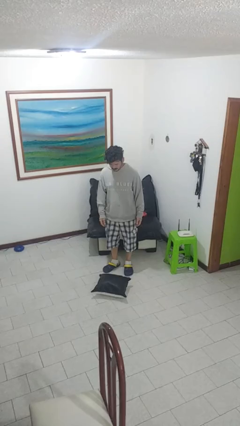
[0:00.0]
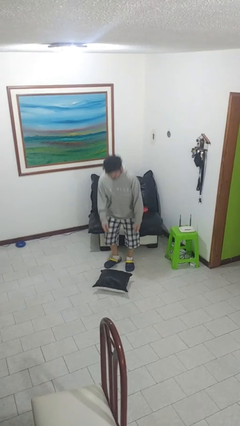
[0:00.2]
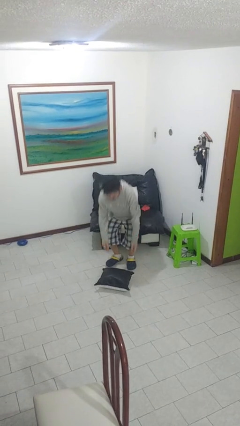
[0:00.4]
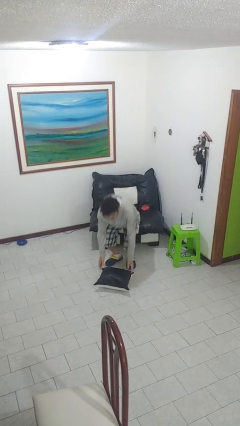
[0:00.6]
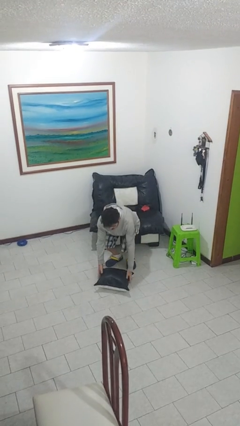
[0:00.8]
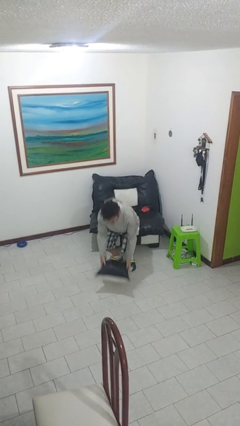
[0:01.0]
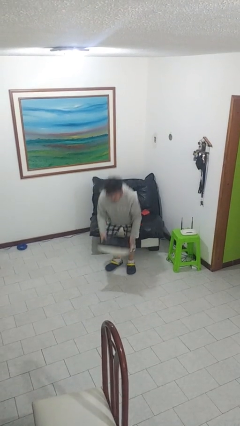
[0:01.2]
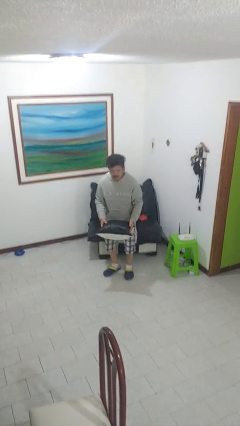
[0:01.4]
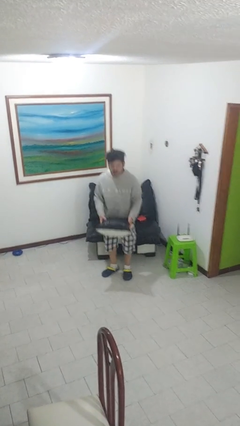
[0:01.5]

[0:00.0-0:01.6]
person picks up object from floor

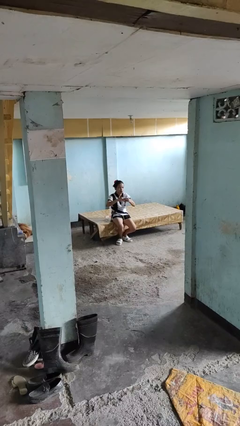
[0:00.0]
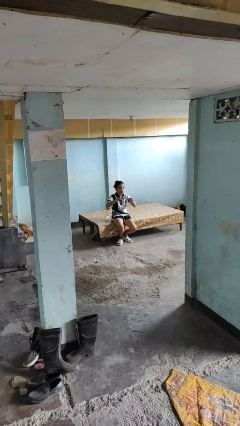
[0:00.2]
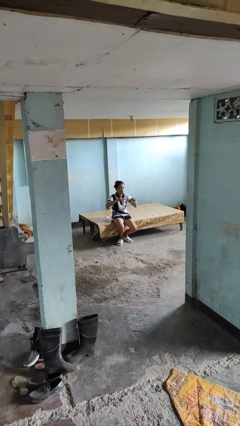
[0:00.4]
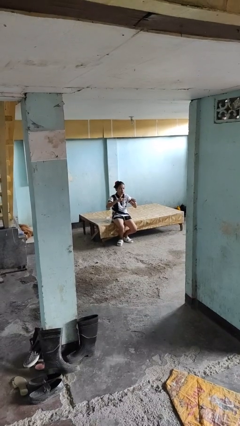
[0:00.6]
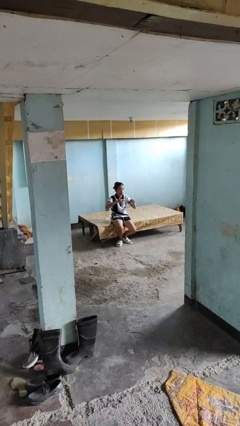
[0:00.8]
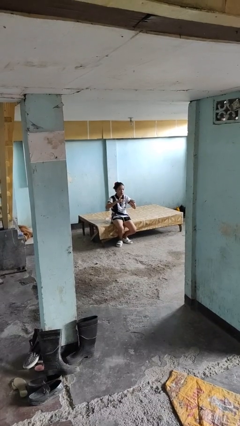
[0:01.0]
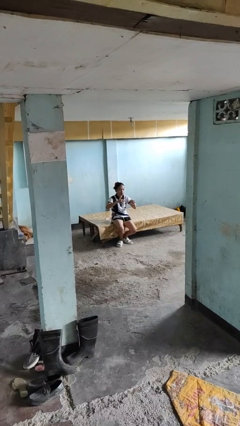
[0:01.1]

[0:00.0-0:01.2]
person takes off ring

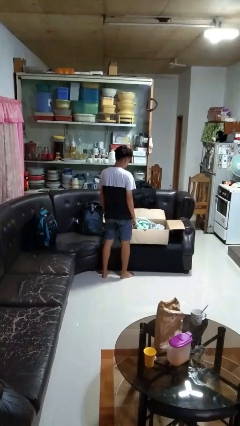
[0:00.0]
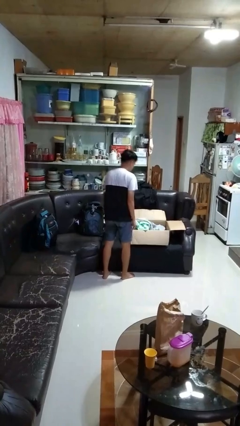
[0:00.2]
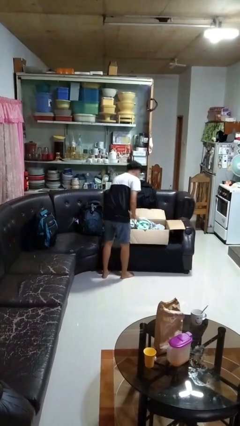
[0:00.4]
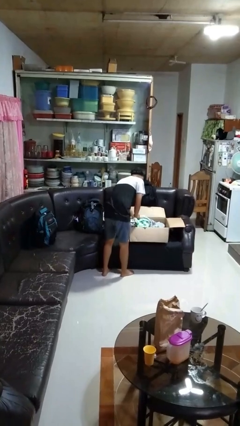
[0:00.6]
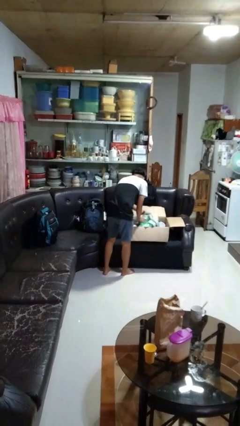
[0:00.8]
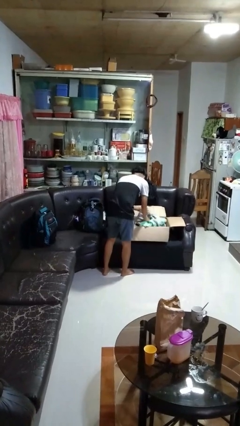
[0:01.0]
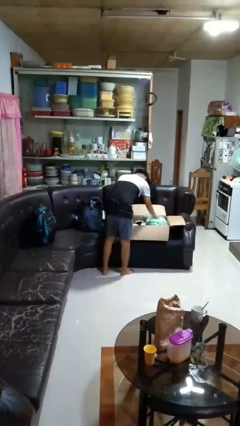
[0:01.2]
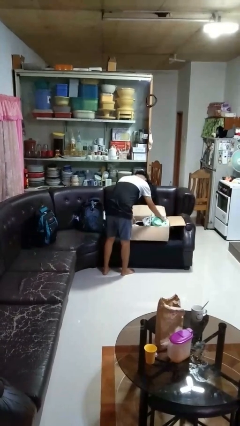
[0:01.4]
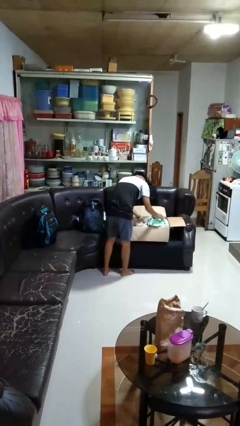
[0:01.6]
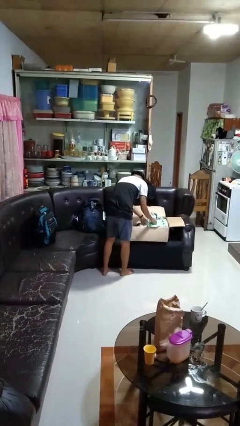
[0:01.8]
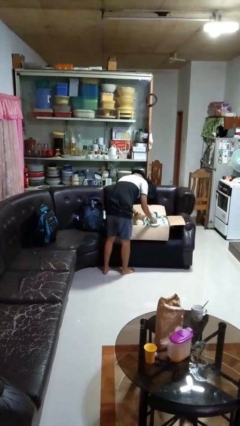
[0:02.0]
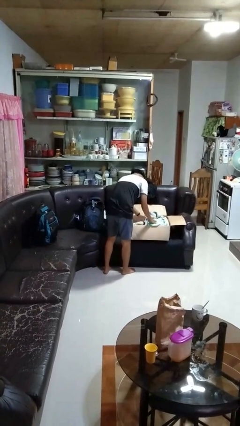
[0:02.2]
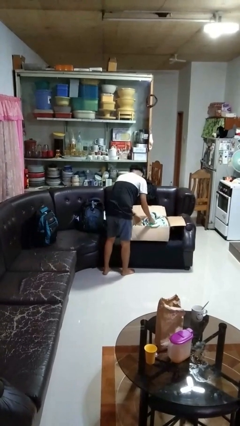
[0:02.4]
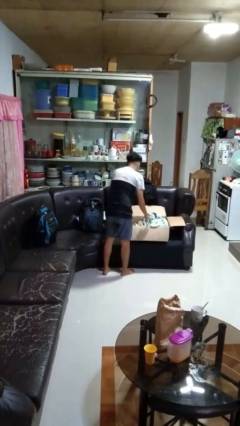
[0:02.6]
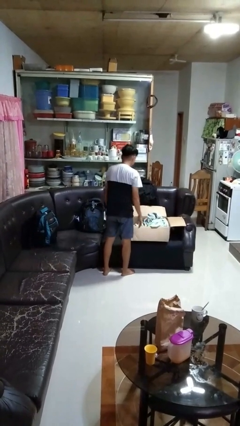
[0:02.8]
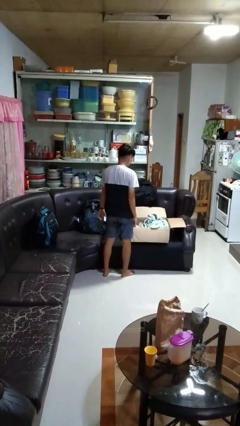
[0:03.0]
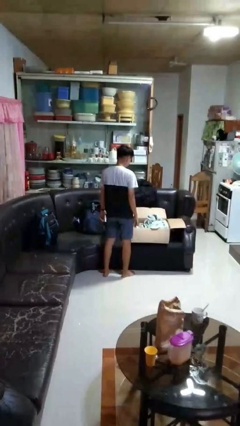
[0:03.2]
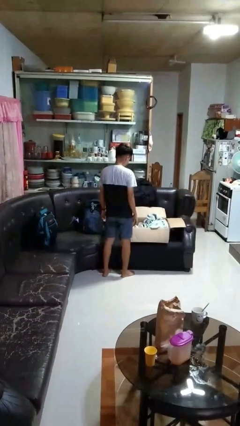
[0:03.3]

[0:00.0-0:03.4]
person searches in box

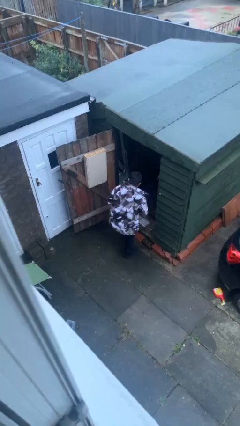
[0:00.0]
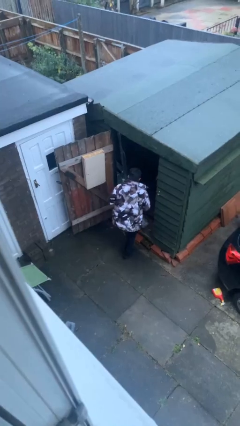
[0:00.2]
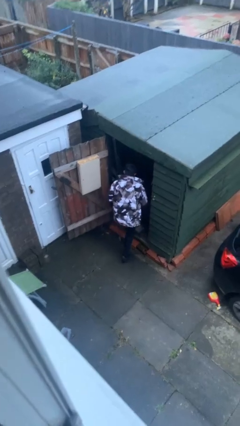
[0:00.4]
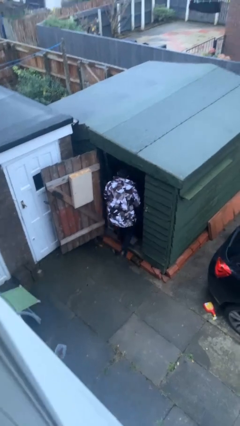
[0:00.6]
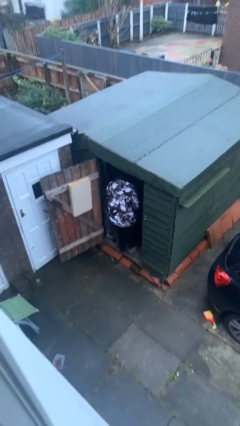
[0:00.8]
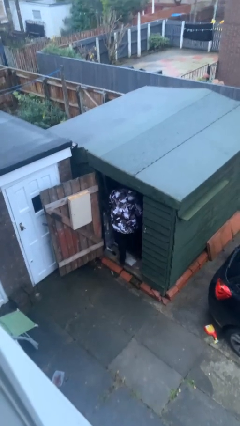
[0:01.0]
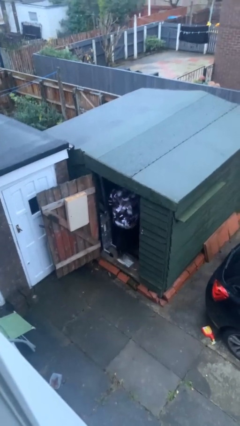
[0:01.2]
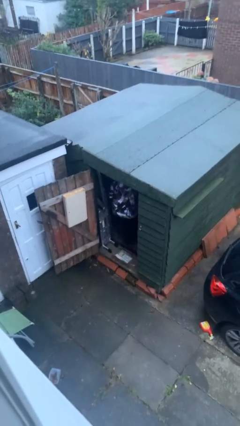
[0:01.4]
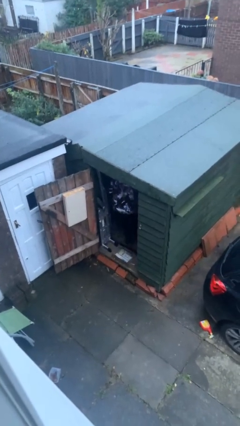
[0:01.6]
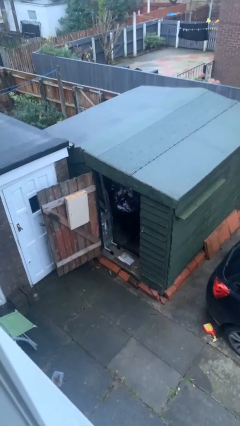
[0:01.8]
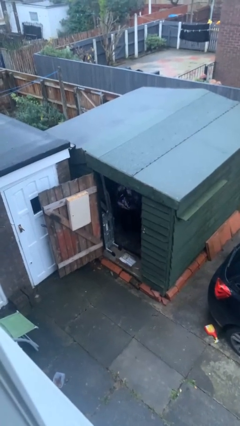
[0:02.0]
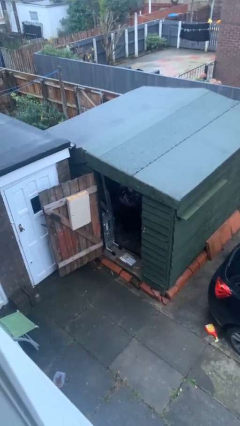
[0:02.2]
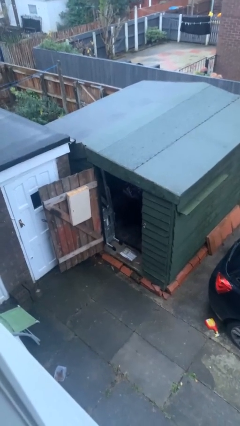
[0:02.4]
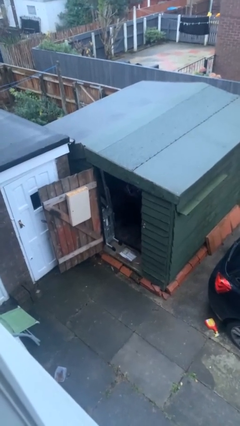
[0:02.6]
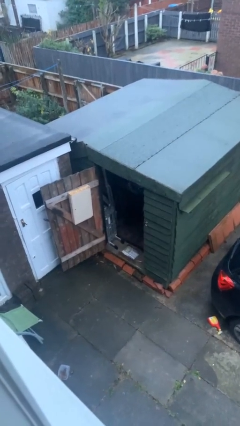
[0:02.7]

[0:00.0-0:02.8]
person exits scene through structure

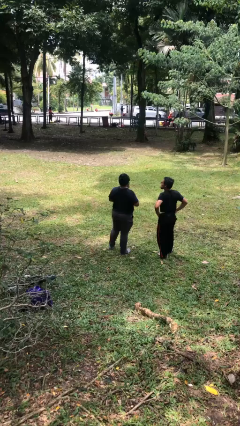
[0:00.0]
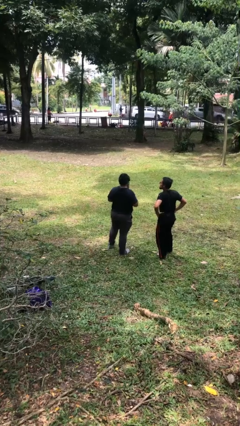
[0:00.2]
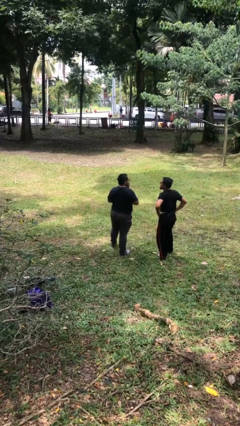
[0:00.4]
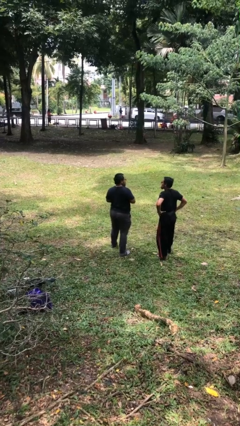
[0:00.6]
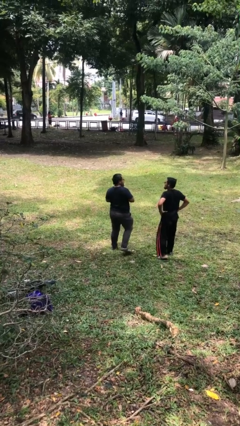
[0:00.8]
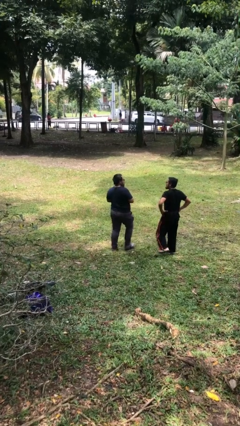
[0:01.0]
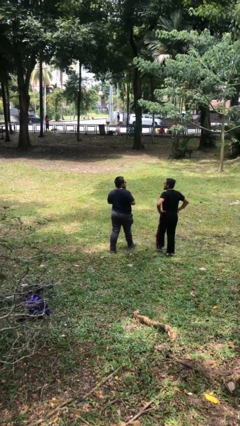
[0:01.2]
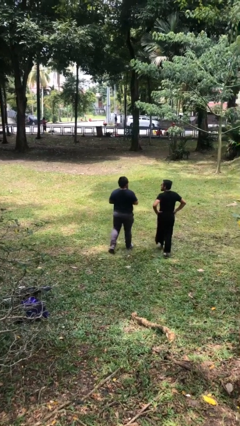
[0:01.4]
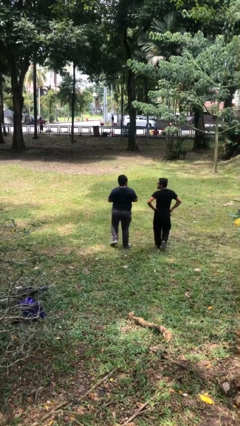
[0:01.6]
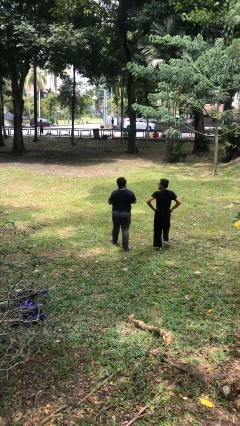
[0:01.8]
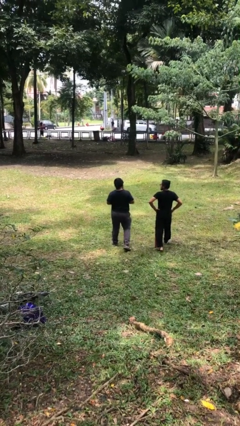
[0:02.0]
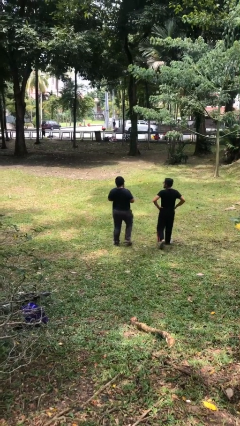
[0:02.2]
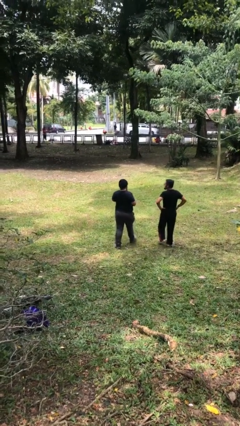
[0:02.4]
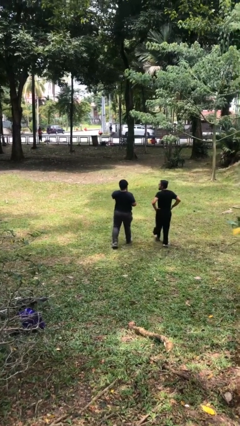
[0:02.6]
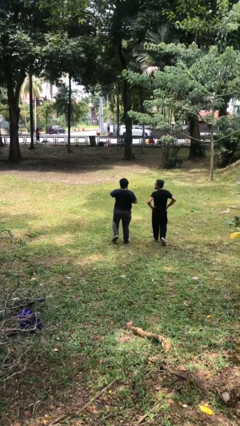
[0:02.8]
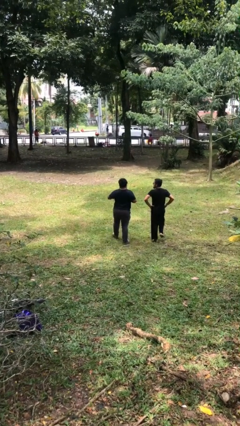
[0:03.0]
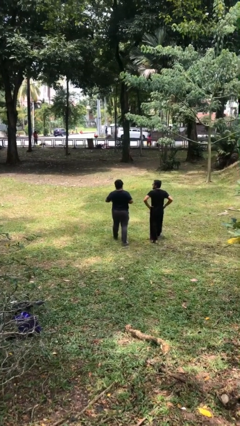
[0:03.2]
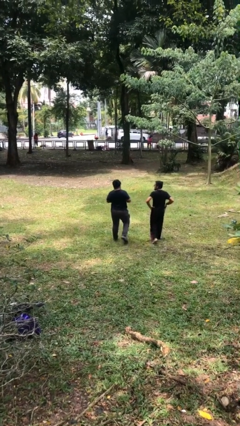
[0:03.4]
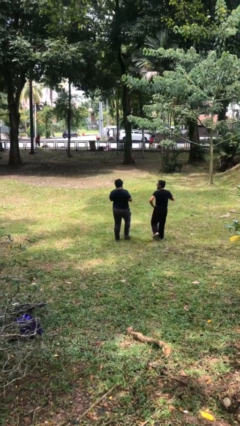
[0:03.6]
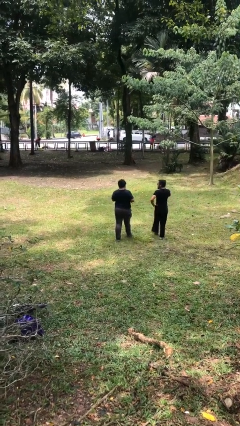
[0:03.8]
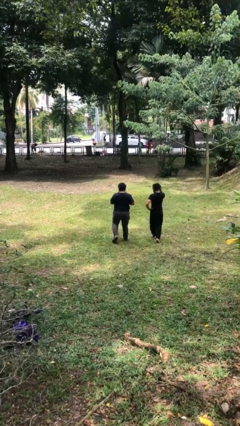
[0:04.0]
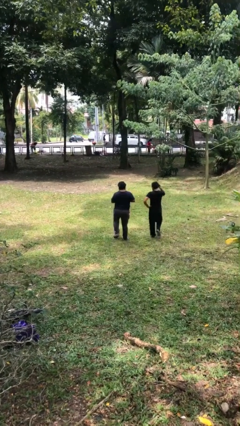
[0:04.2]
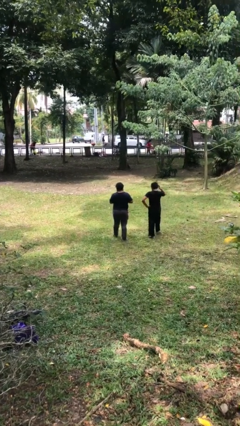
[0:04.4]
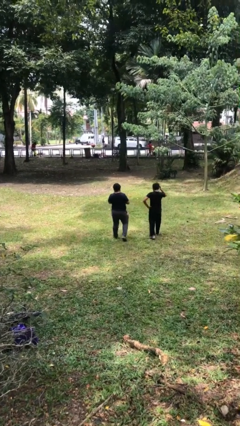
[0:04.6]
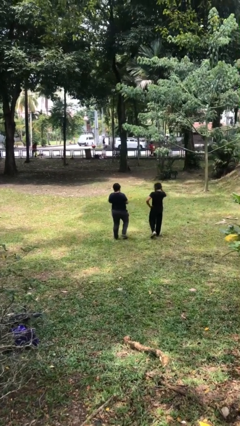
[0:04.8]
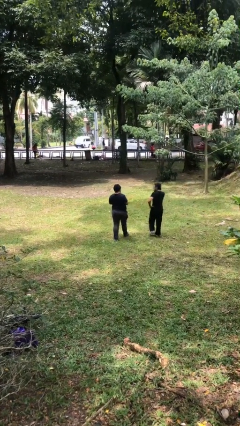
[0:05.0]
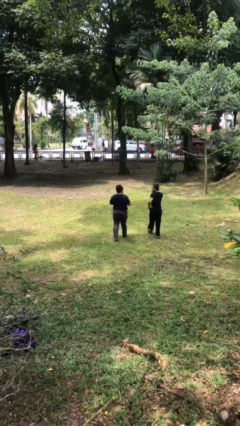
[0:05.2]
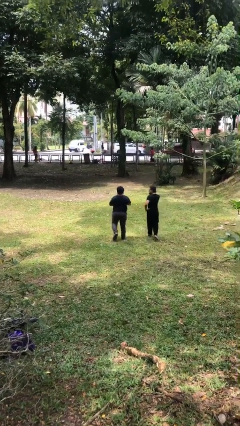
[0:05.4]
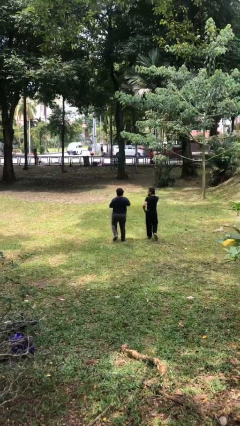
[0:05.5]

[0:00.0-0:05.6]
person talks to person

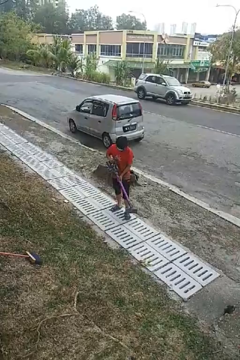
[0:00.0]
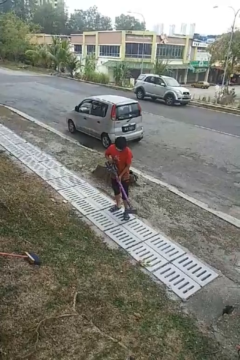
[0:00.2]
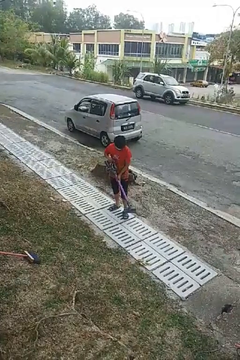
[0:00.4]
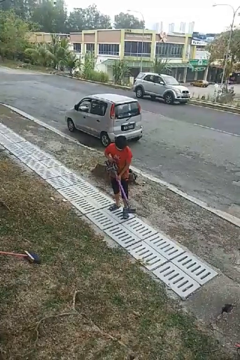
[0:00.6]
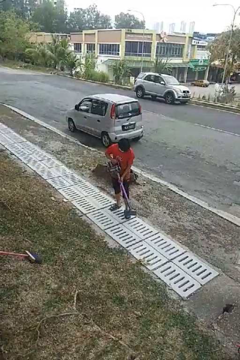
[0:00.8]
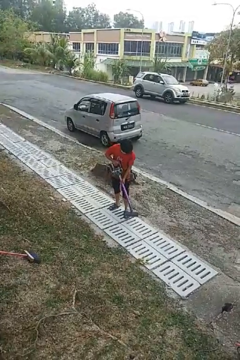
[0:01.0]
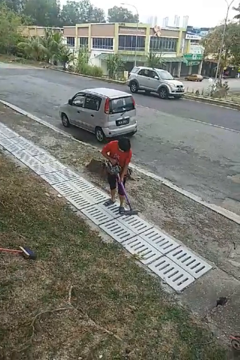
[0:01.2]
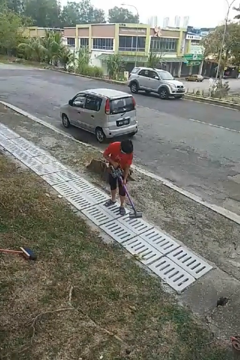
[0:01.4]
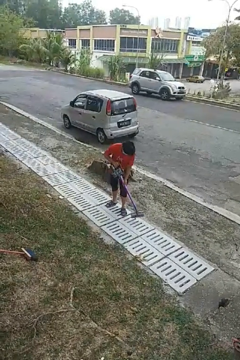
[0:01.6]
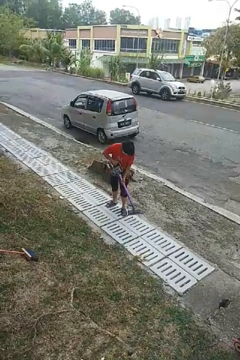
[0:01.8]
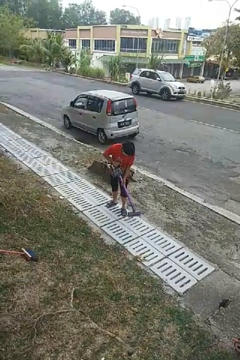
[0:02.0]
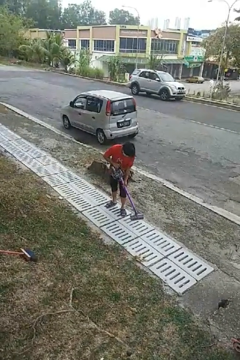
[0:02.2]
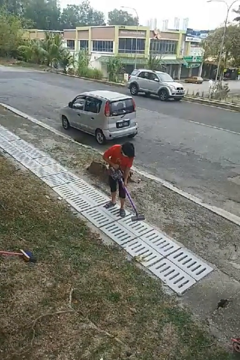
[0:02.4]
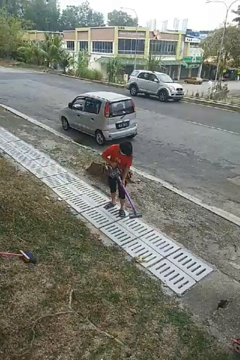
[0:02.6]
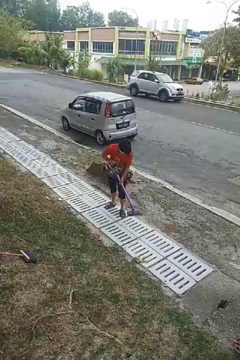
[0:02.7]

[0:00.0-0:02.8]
person vacuums carpet
